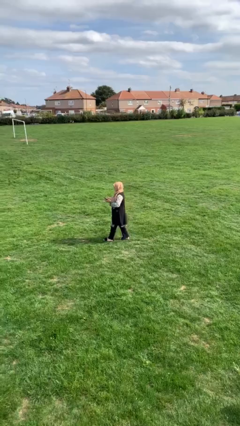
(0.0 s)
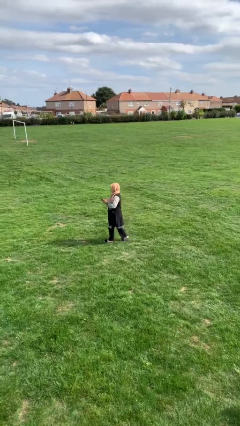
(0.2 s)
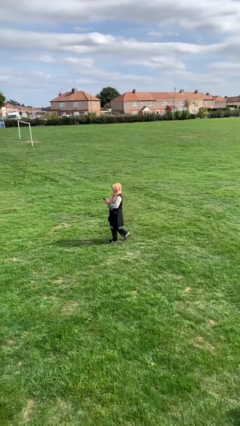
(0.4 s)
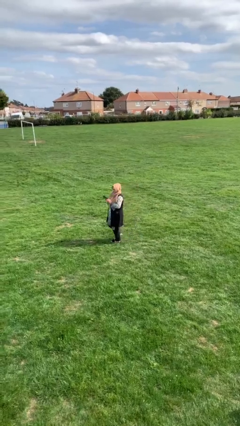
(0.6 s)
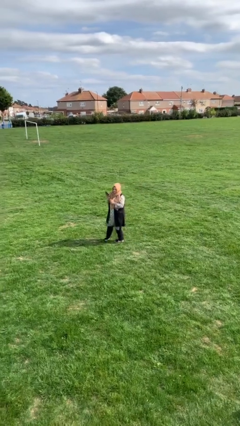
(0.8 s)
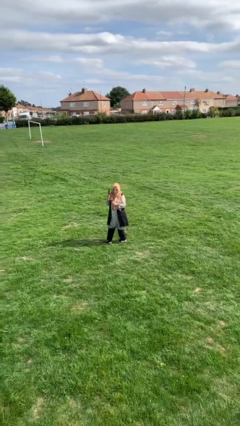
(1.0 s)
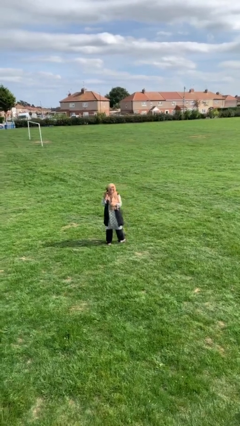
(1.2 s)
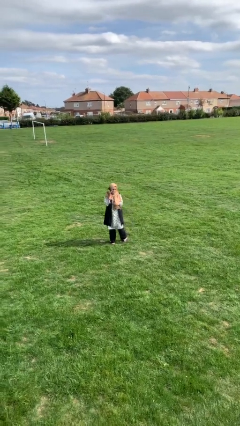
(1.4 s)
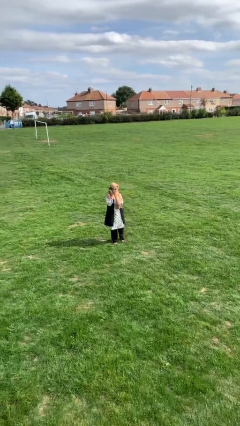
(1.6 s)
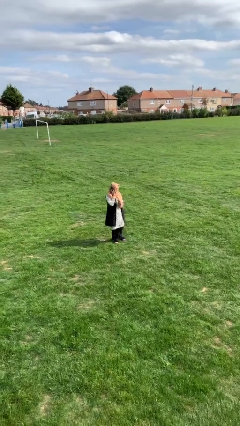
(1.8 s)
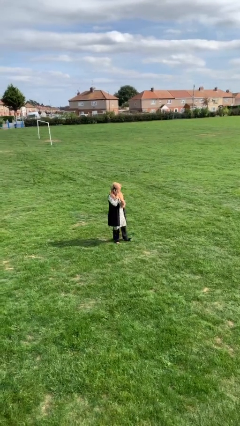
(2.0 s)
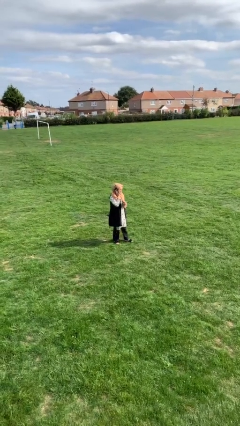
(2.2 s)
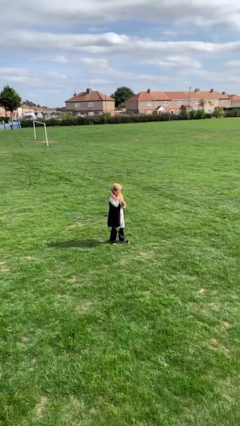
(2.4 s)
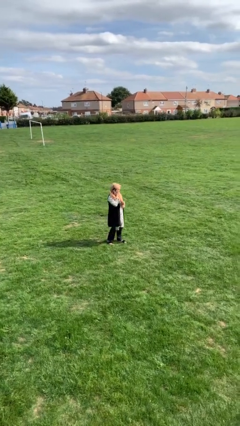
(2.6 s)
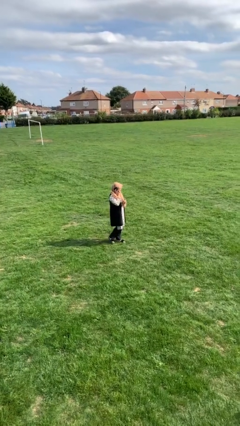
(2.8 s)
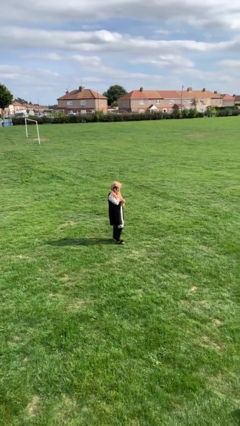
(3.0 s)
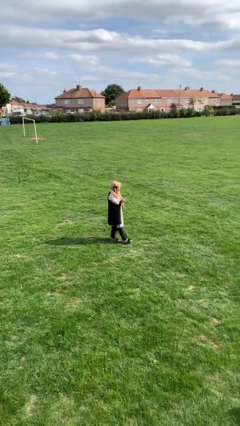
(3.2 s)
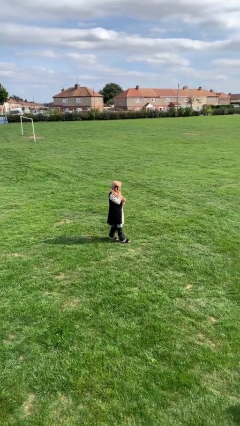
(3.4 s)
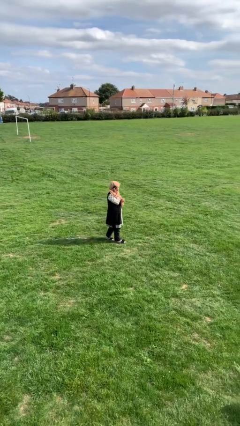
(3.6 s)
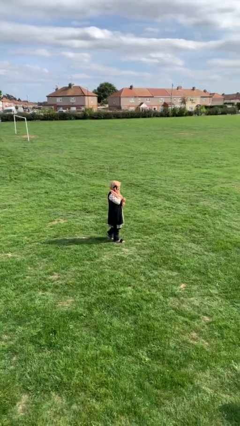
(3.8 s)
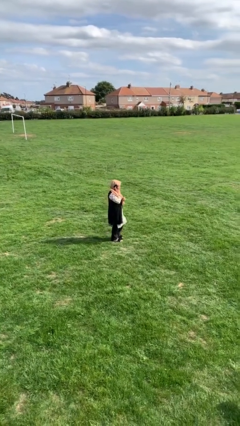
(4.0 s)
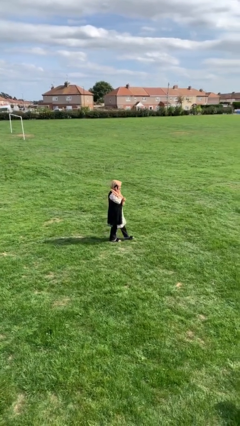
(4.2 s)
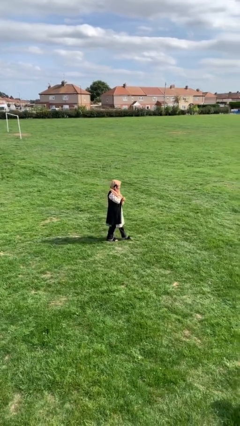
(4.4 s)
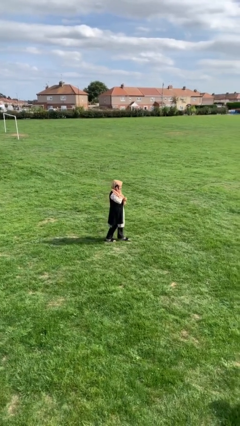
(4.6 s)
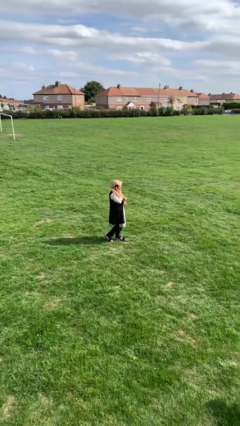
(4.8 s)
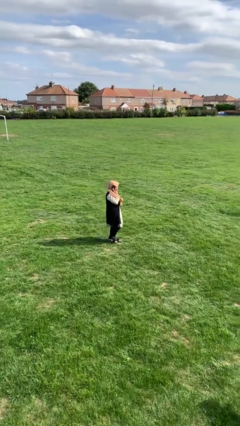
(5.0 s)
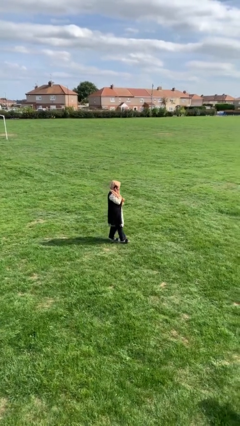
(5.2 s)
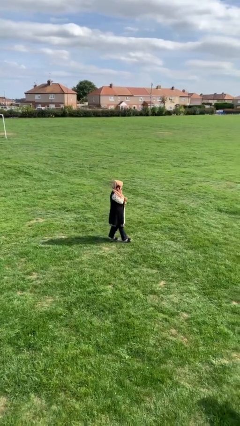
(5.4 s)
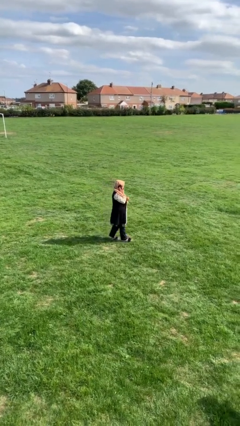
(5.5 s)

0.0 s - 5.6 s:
person talks on phone

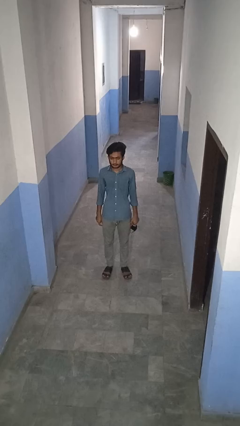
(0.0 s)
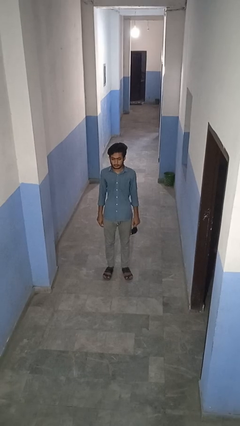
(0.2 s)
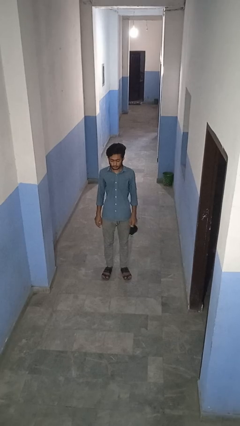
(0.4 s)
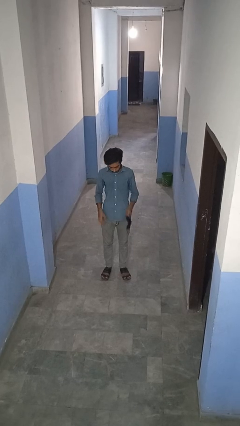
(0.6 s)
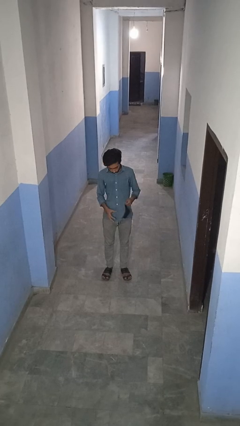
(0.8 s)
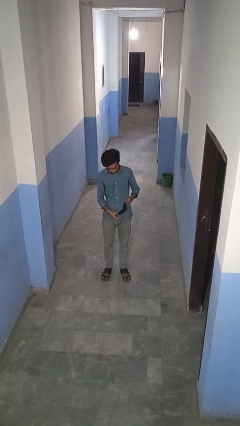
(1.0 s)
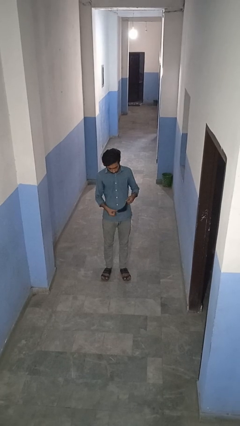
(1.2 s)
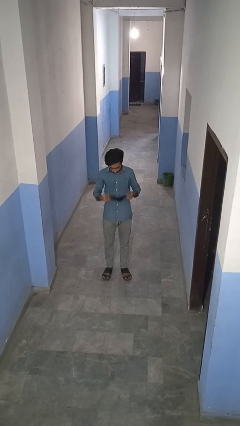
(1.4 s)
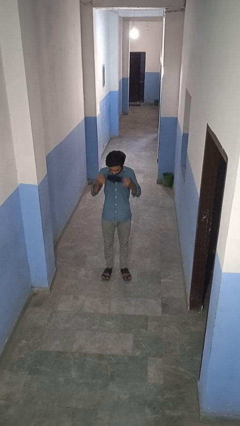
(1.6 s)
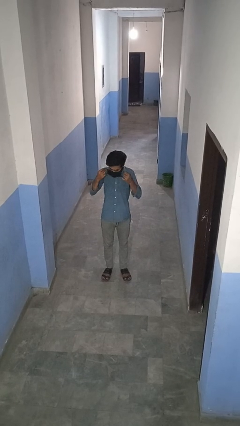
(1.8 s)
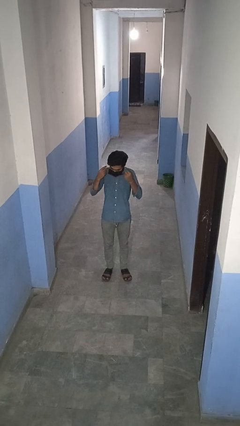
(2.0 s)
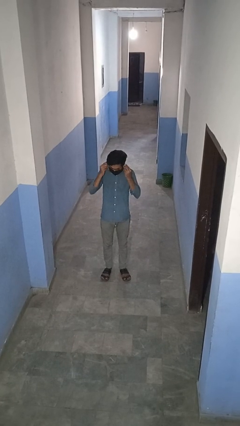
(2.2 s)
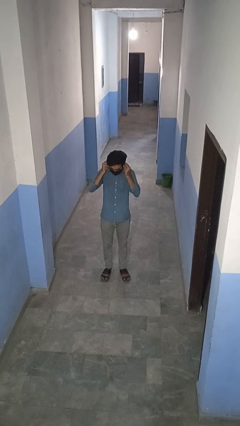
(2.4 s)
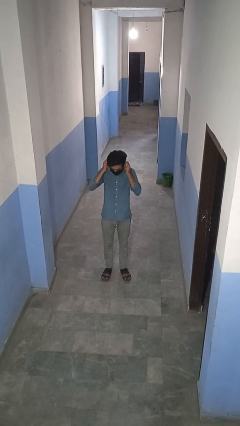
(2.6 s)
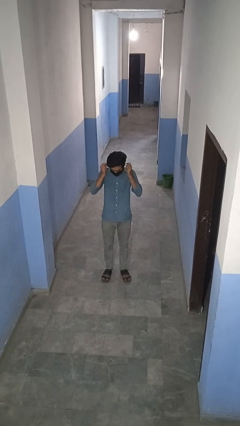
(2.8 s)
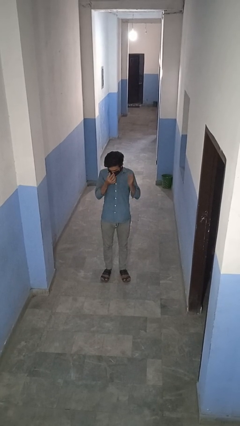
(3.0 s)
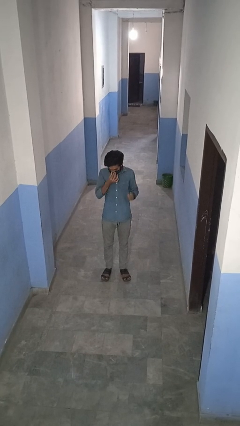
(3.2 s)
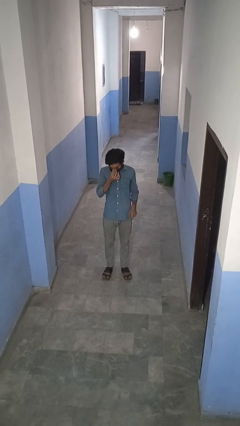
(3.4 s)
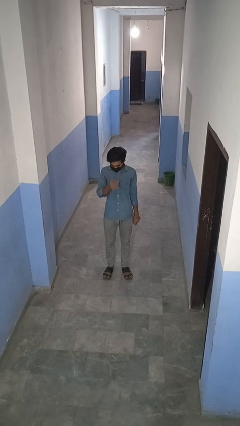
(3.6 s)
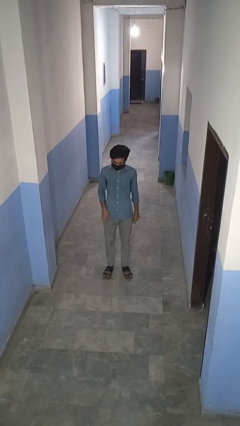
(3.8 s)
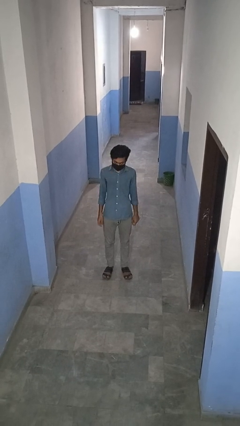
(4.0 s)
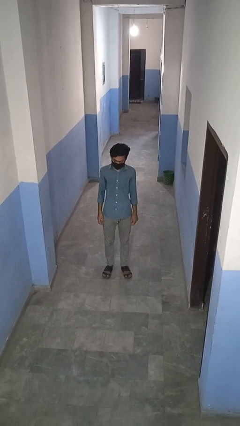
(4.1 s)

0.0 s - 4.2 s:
person puts on facemask

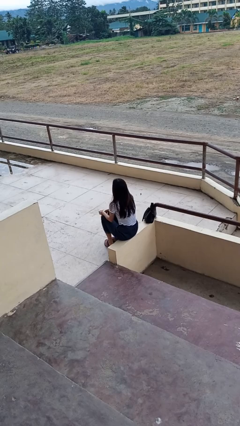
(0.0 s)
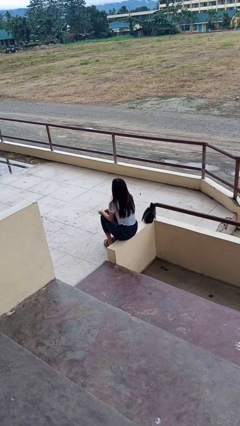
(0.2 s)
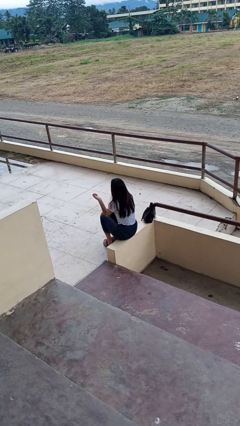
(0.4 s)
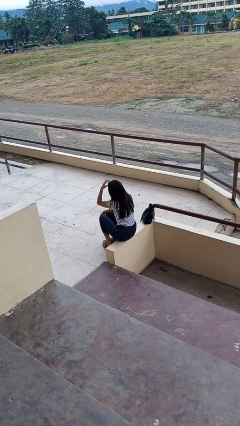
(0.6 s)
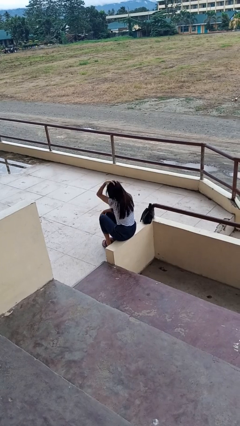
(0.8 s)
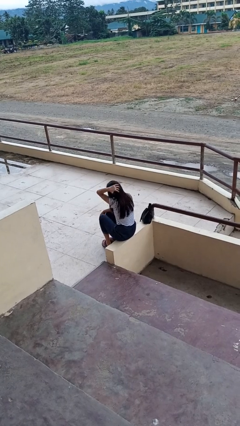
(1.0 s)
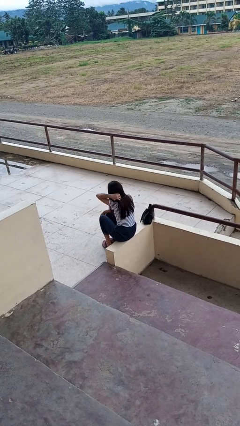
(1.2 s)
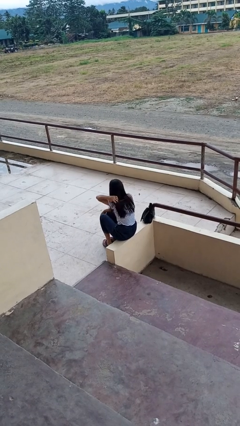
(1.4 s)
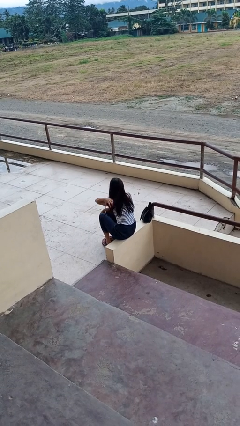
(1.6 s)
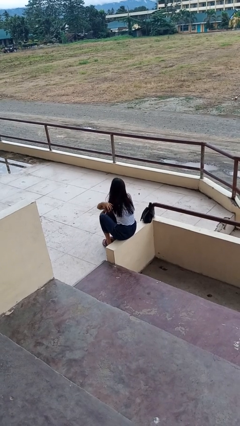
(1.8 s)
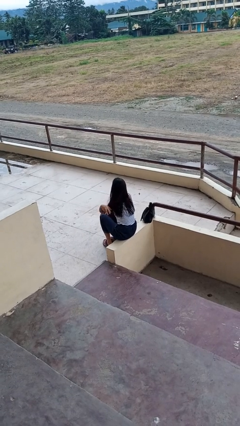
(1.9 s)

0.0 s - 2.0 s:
person strokes hair

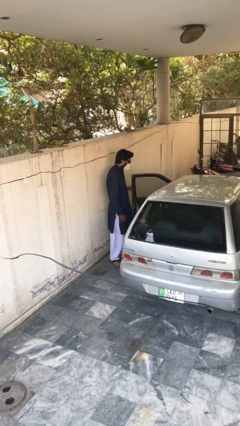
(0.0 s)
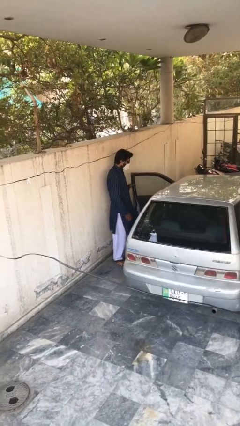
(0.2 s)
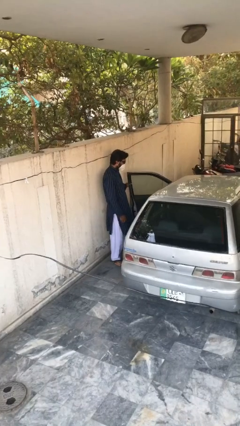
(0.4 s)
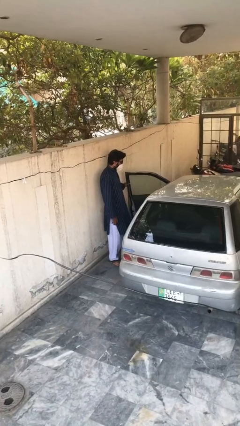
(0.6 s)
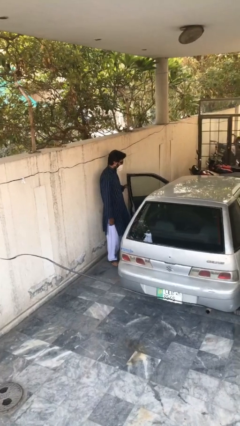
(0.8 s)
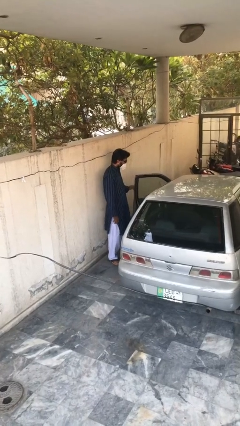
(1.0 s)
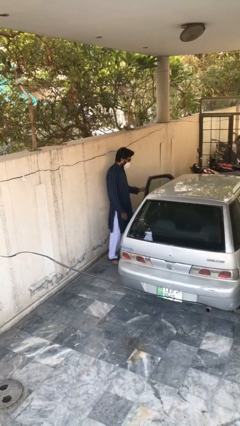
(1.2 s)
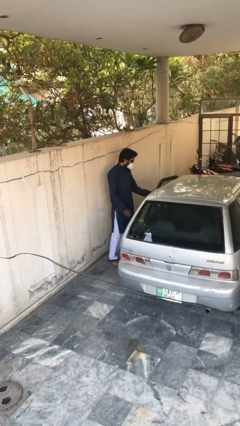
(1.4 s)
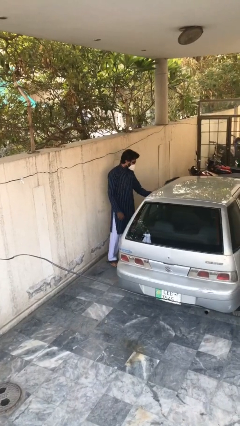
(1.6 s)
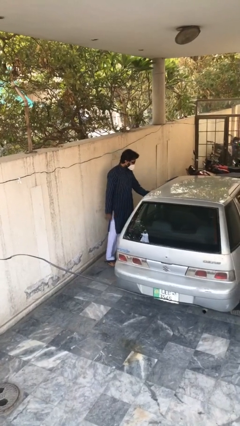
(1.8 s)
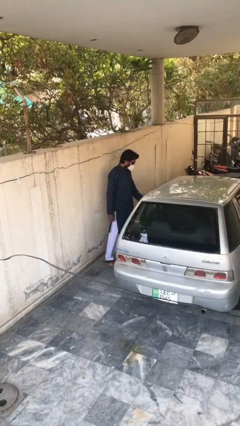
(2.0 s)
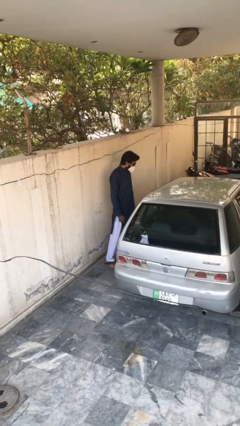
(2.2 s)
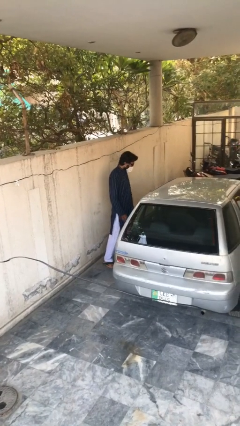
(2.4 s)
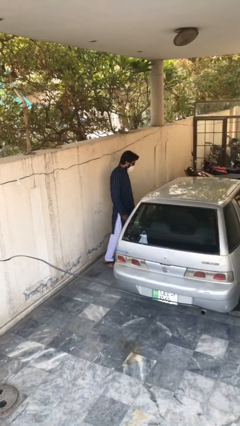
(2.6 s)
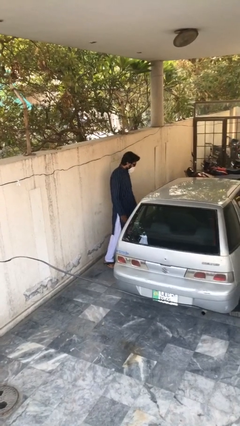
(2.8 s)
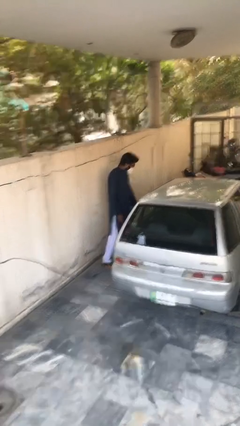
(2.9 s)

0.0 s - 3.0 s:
person closes car door

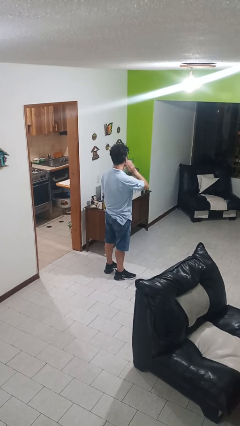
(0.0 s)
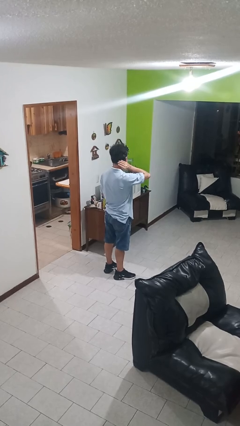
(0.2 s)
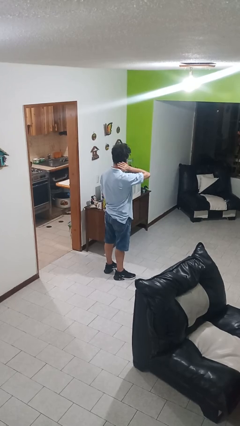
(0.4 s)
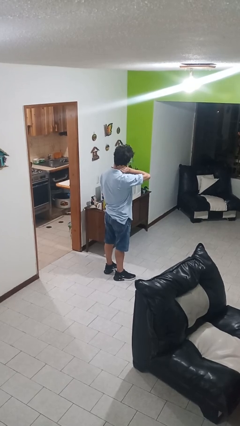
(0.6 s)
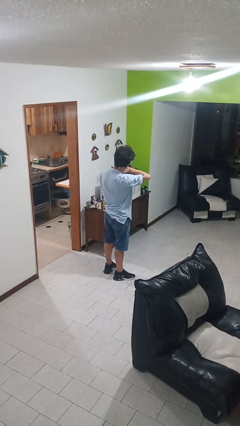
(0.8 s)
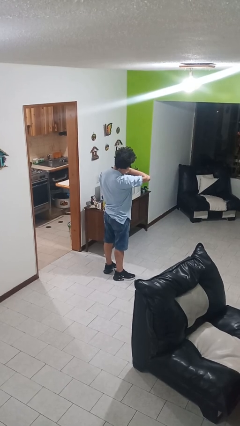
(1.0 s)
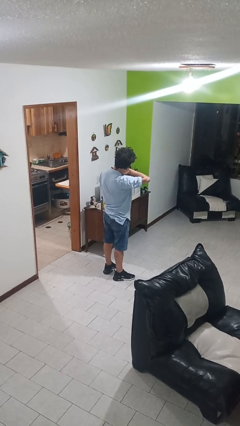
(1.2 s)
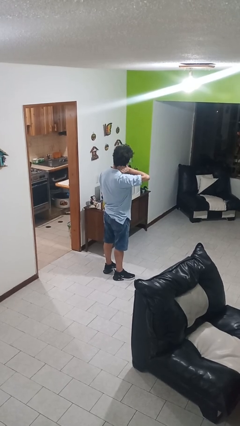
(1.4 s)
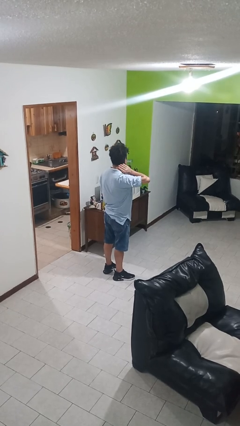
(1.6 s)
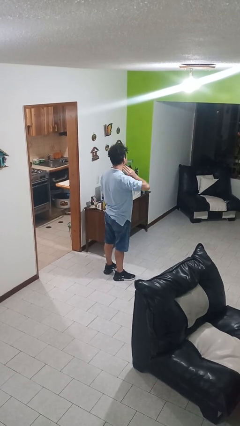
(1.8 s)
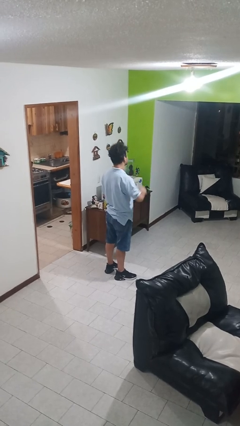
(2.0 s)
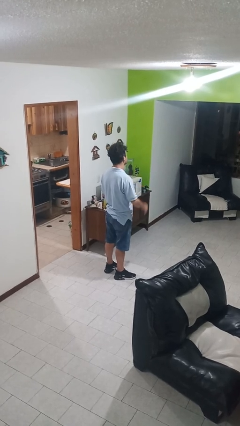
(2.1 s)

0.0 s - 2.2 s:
person rubs neck
